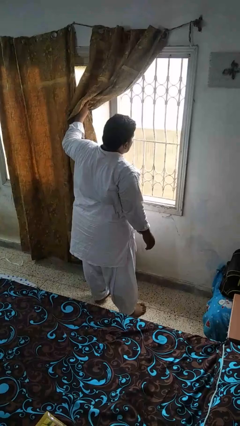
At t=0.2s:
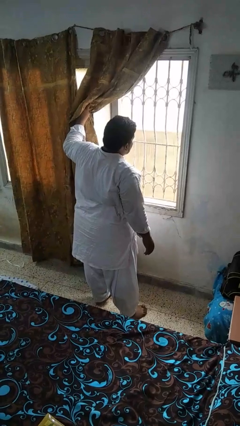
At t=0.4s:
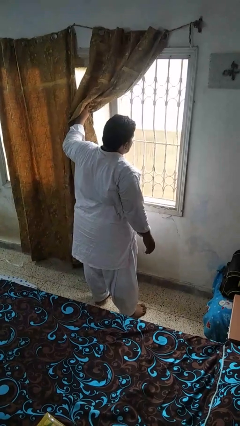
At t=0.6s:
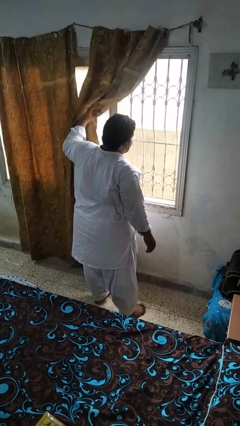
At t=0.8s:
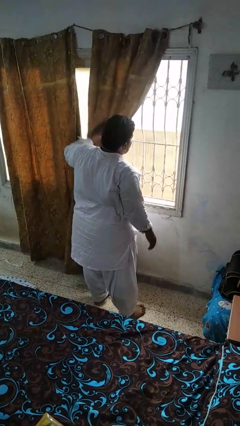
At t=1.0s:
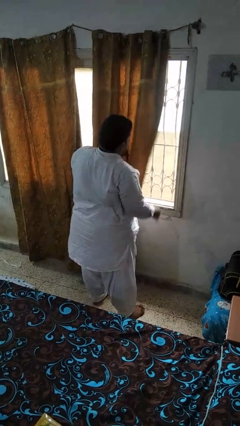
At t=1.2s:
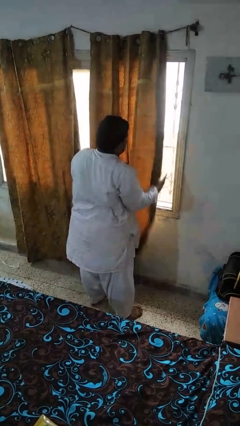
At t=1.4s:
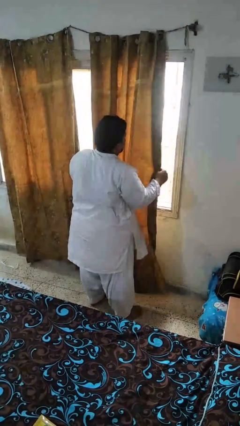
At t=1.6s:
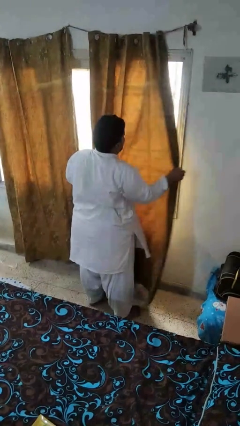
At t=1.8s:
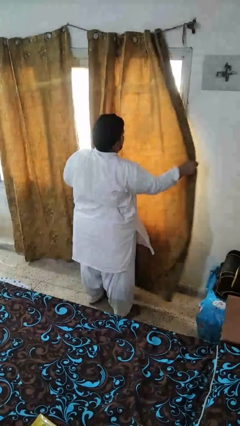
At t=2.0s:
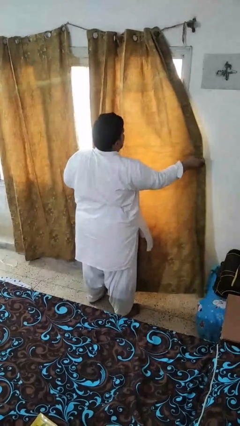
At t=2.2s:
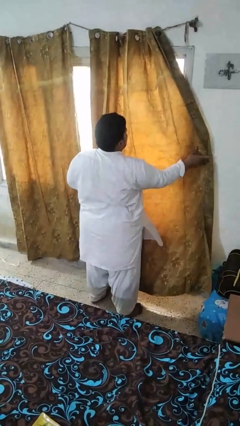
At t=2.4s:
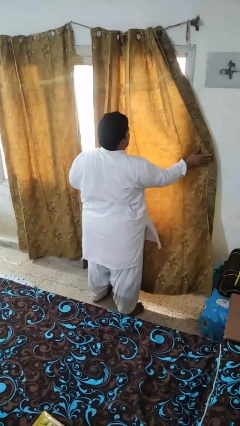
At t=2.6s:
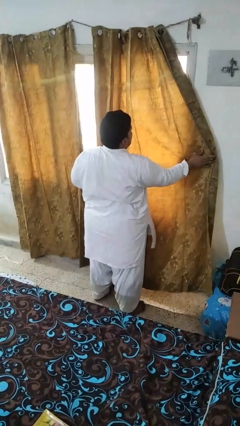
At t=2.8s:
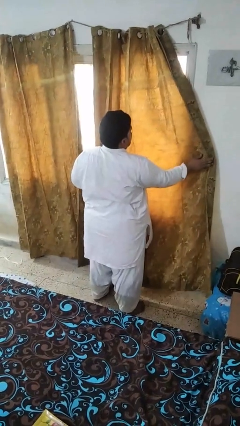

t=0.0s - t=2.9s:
person closes curtains

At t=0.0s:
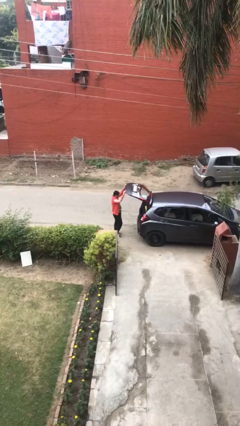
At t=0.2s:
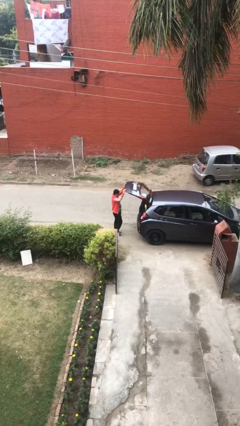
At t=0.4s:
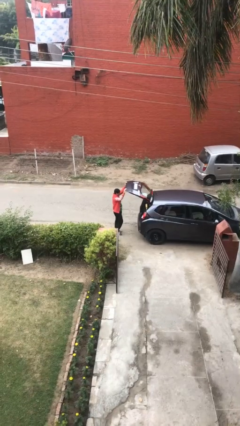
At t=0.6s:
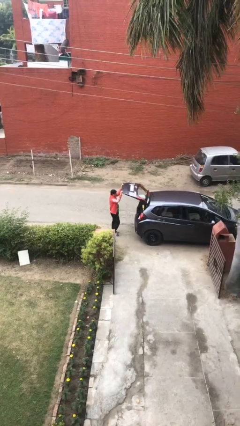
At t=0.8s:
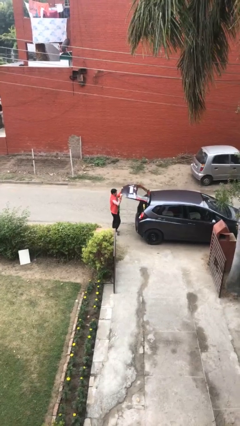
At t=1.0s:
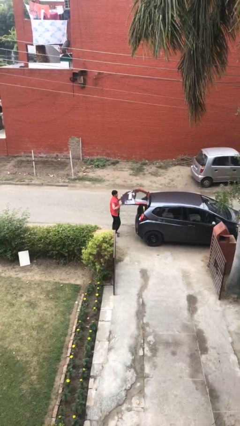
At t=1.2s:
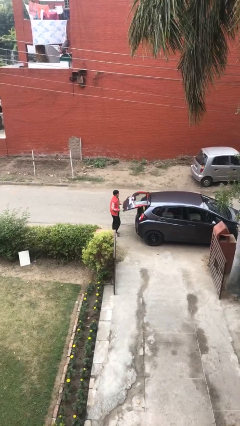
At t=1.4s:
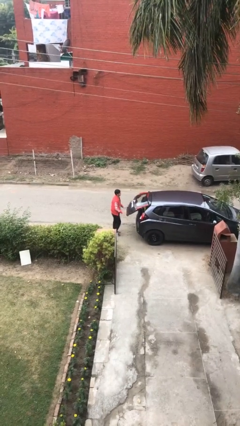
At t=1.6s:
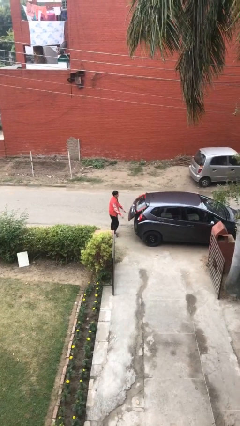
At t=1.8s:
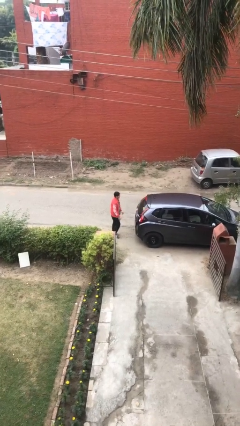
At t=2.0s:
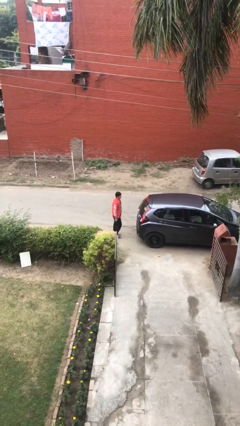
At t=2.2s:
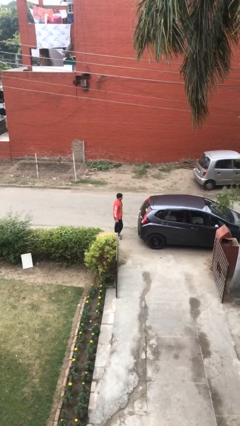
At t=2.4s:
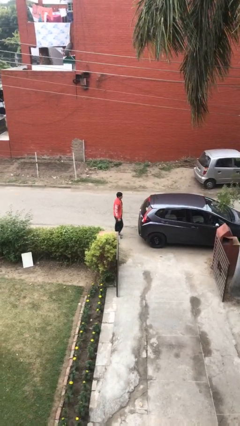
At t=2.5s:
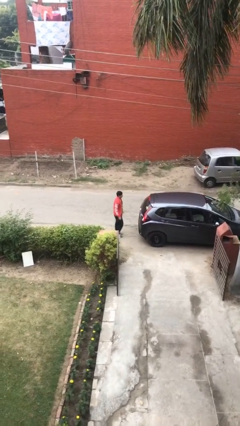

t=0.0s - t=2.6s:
person closes car trunk

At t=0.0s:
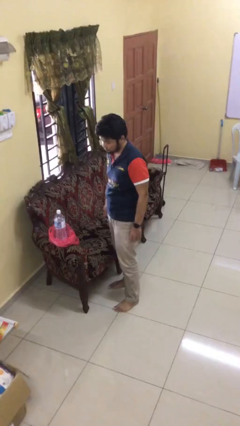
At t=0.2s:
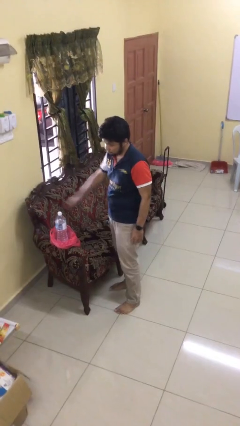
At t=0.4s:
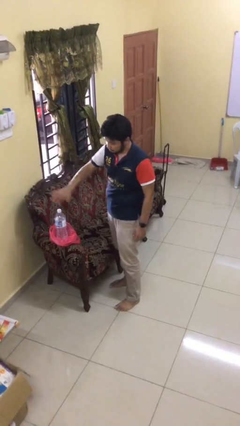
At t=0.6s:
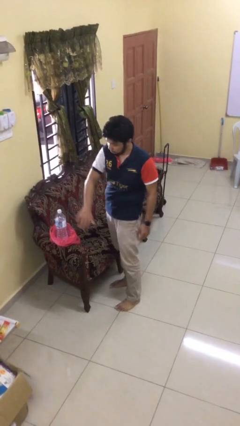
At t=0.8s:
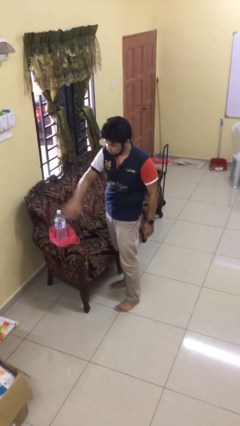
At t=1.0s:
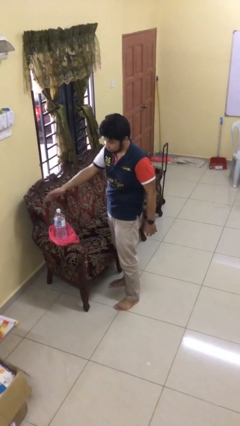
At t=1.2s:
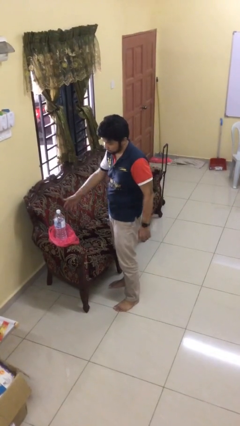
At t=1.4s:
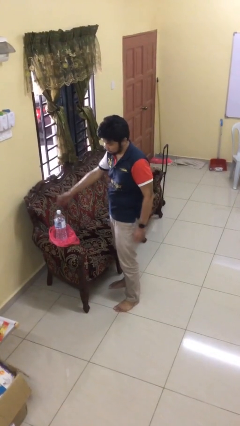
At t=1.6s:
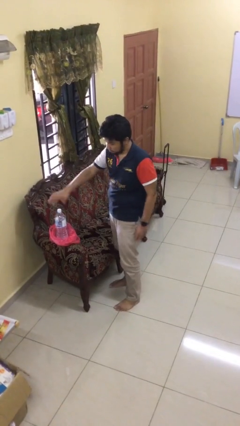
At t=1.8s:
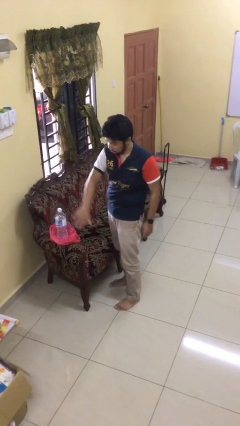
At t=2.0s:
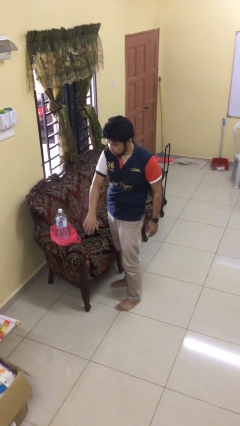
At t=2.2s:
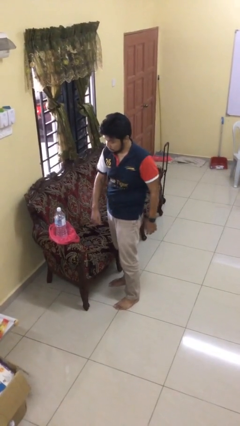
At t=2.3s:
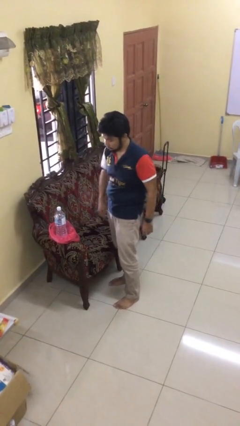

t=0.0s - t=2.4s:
person waves hand over object

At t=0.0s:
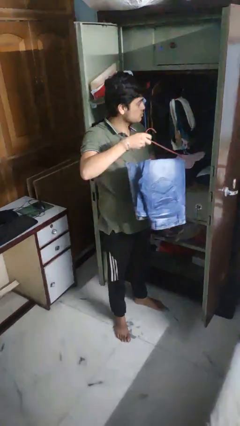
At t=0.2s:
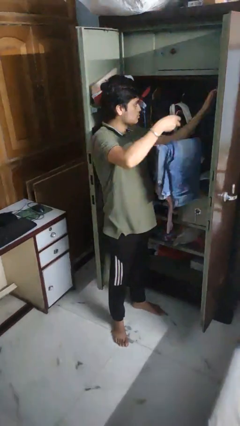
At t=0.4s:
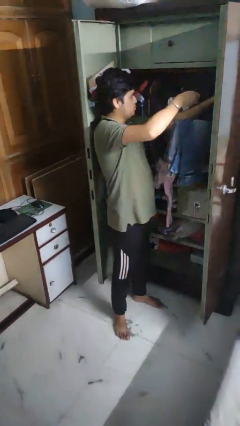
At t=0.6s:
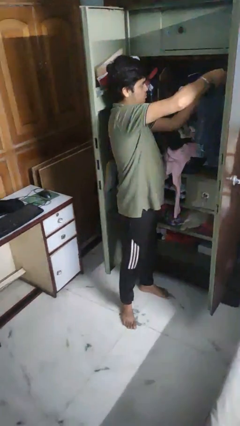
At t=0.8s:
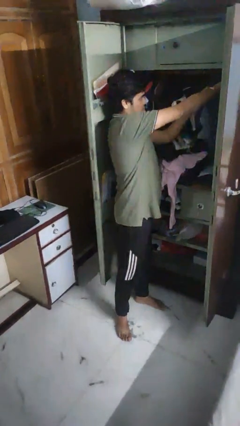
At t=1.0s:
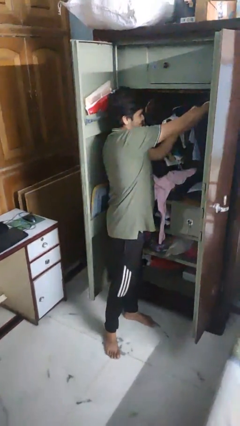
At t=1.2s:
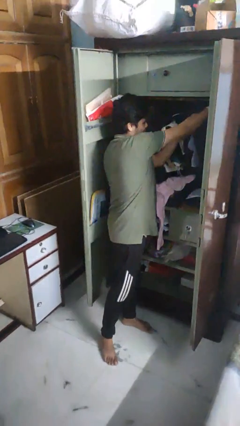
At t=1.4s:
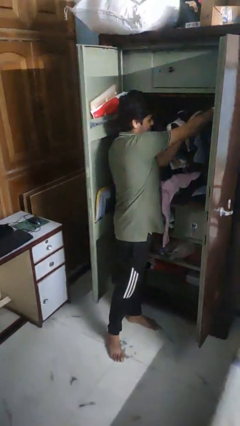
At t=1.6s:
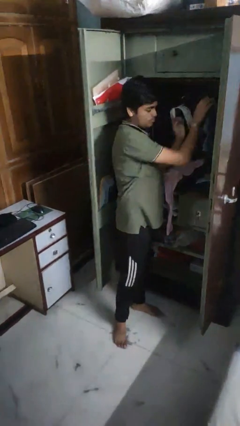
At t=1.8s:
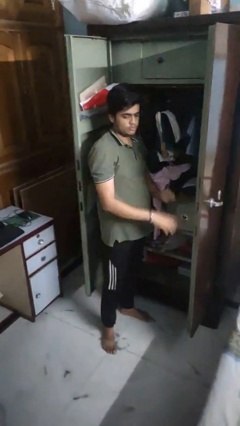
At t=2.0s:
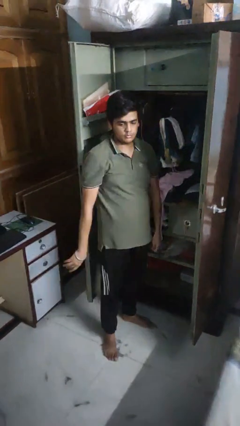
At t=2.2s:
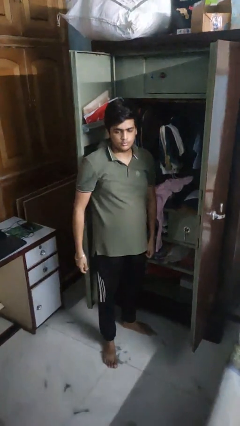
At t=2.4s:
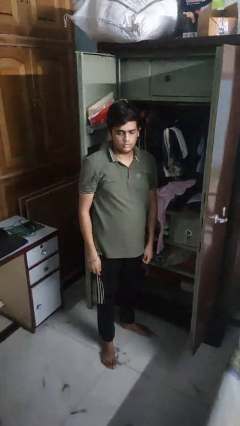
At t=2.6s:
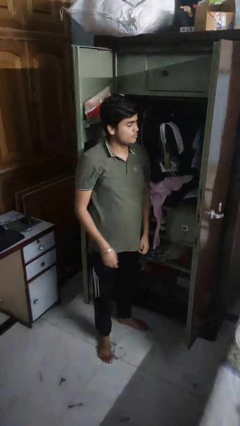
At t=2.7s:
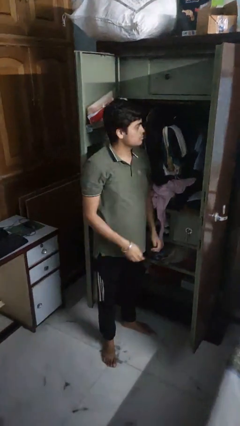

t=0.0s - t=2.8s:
person puts clothes into closet

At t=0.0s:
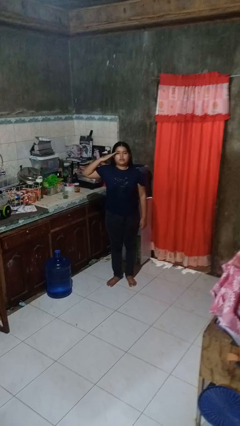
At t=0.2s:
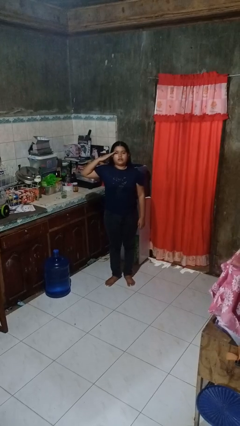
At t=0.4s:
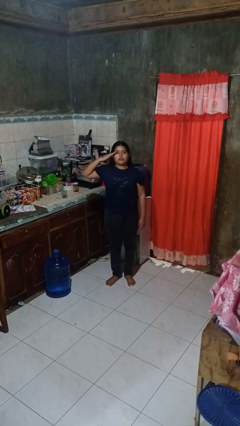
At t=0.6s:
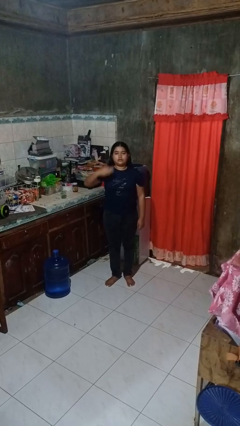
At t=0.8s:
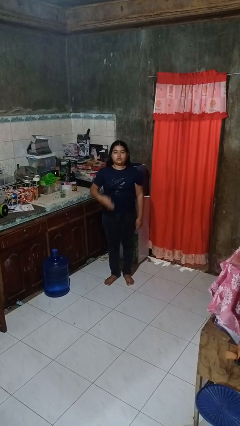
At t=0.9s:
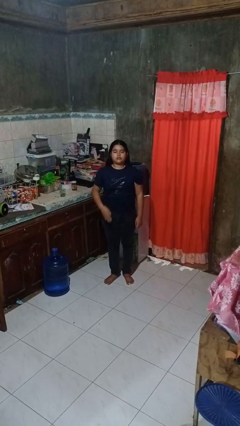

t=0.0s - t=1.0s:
person salutes

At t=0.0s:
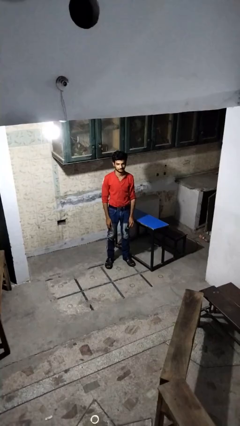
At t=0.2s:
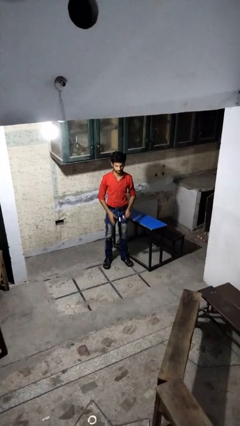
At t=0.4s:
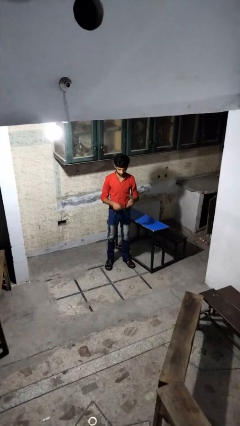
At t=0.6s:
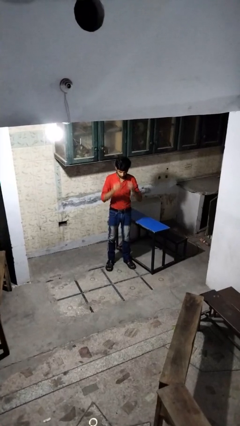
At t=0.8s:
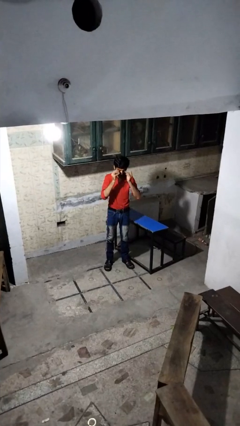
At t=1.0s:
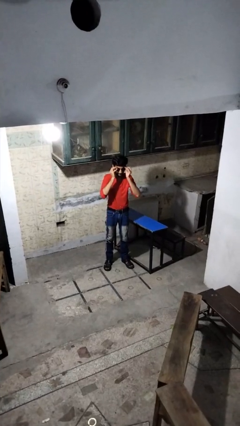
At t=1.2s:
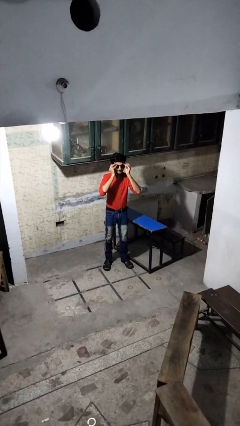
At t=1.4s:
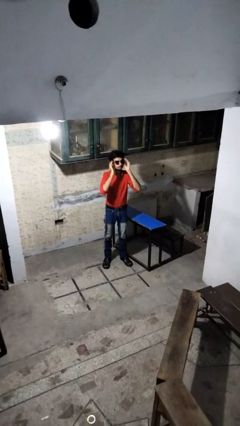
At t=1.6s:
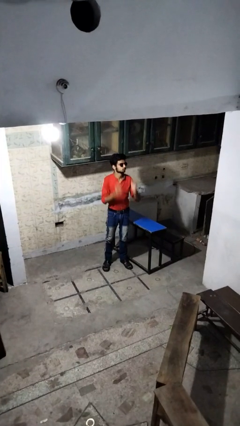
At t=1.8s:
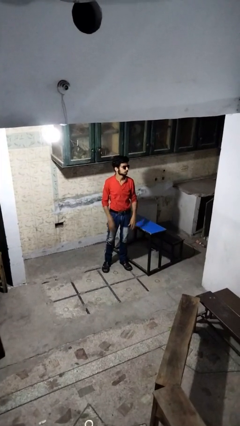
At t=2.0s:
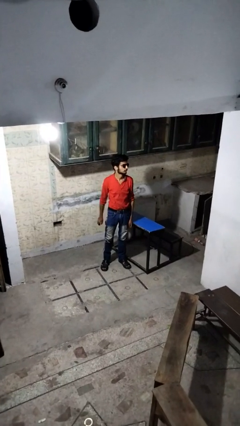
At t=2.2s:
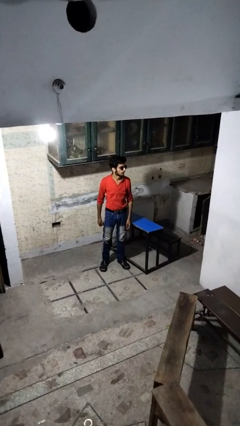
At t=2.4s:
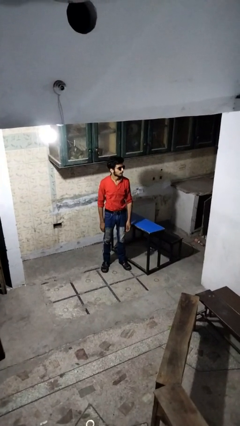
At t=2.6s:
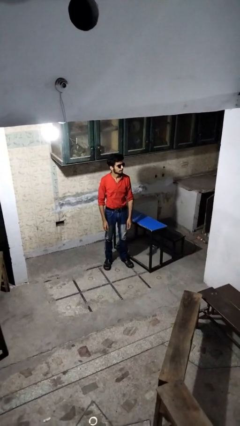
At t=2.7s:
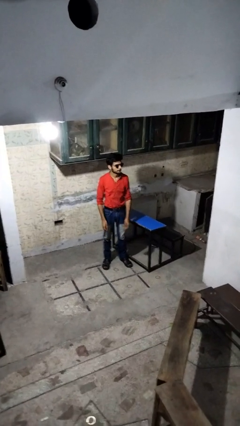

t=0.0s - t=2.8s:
person puts on sunglasses

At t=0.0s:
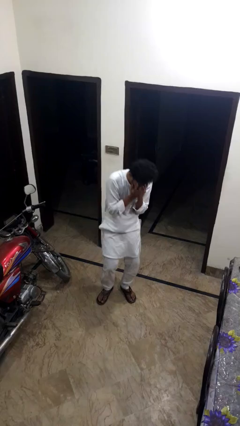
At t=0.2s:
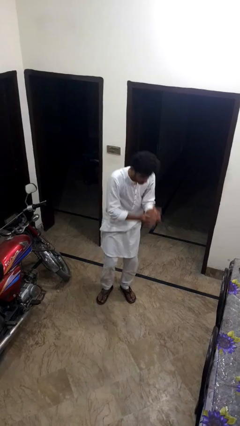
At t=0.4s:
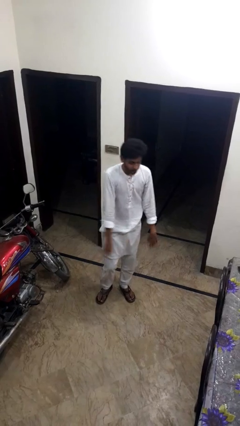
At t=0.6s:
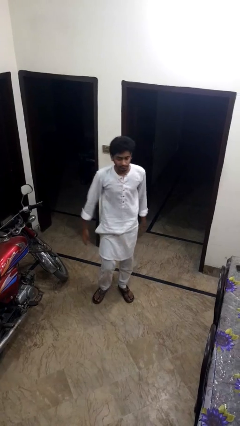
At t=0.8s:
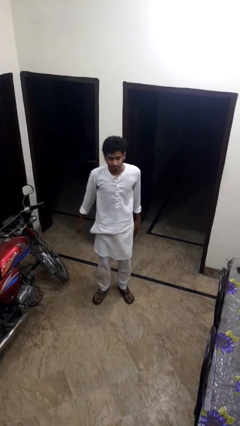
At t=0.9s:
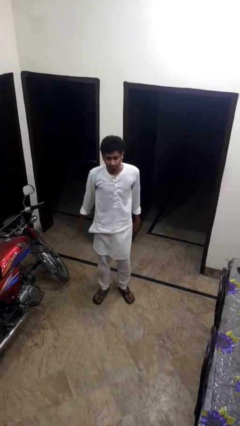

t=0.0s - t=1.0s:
person sneezes into hand

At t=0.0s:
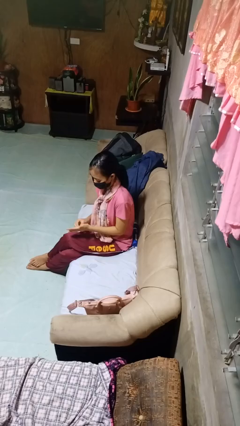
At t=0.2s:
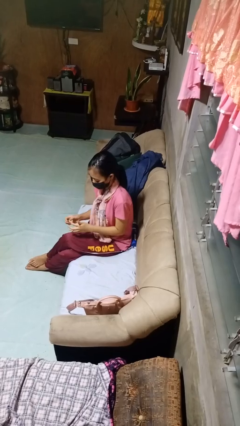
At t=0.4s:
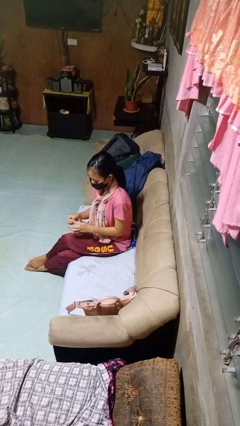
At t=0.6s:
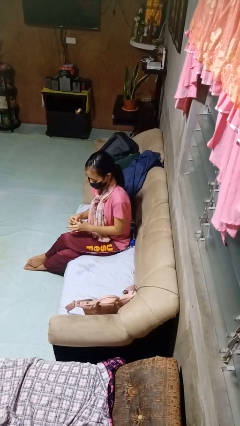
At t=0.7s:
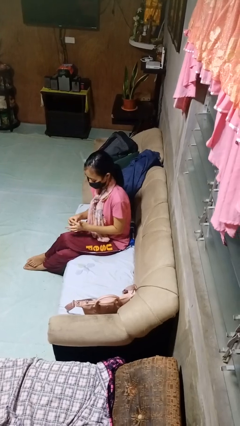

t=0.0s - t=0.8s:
person puts on ring

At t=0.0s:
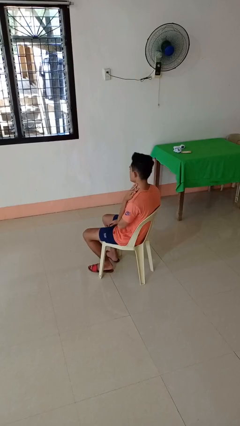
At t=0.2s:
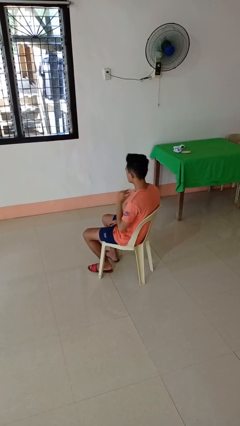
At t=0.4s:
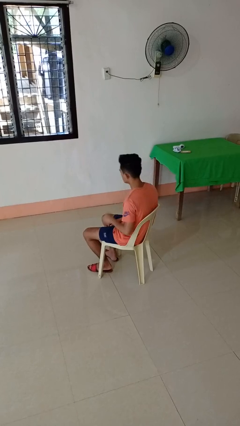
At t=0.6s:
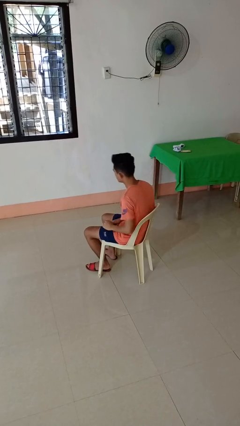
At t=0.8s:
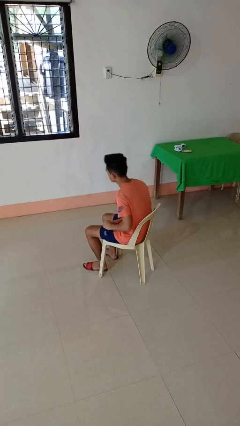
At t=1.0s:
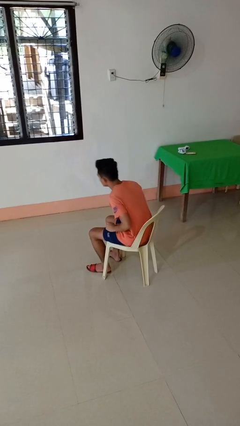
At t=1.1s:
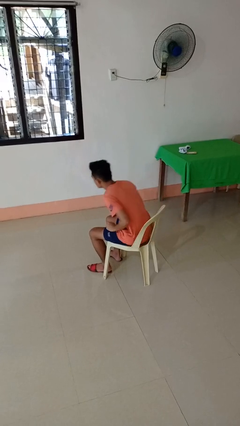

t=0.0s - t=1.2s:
person rubs neck
